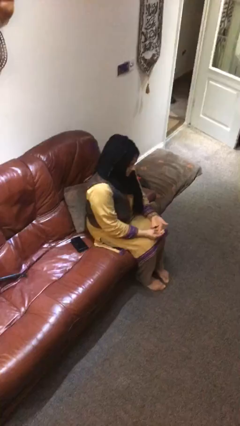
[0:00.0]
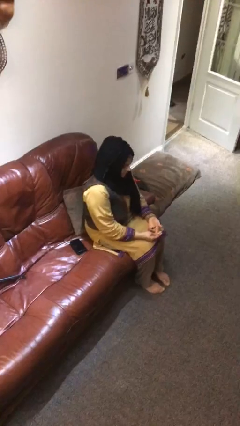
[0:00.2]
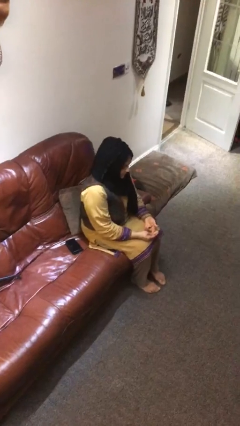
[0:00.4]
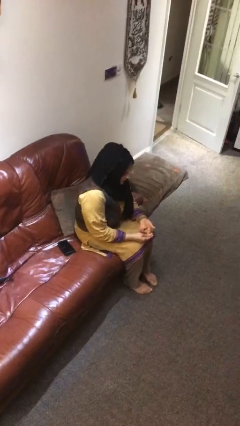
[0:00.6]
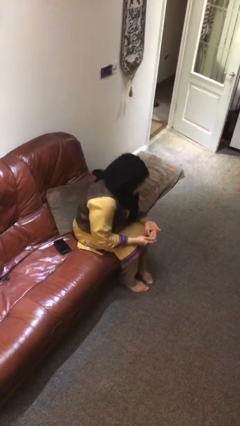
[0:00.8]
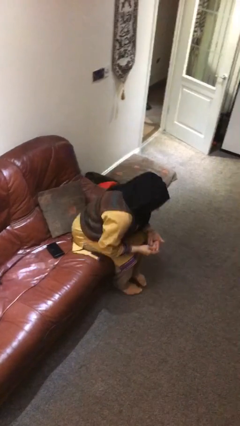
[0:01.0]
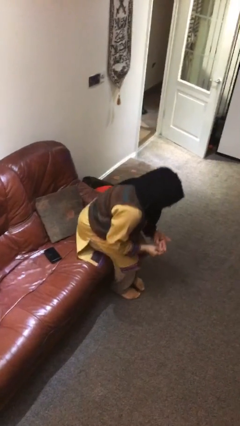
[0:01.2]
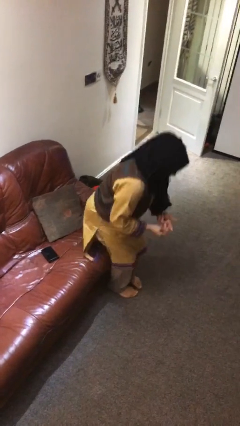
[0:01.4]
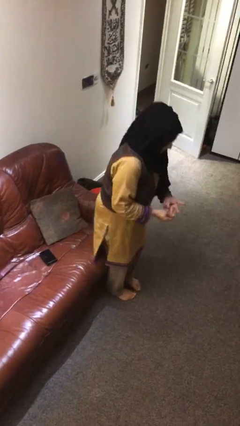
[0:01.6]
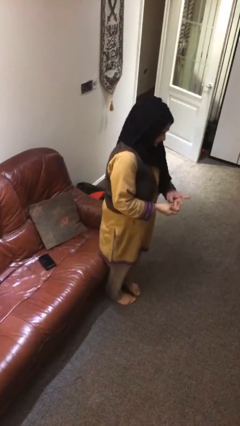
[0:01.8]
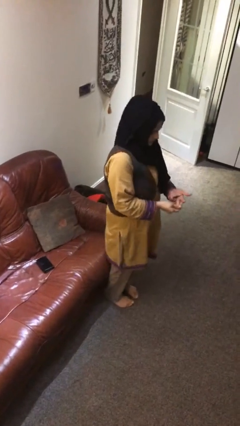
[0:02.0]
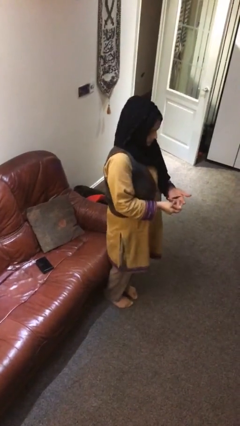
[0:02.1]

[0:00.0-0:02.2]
person stands up

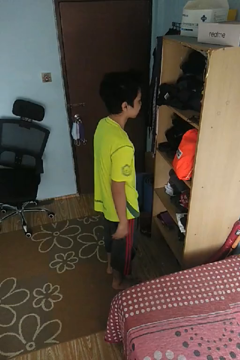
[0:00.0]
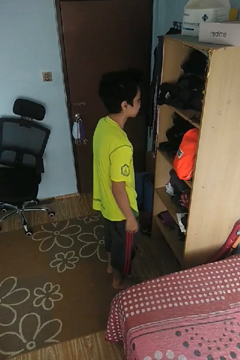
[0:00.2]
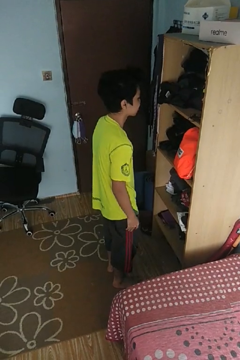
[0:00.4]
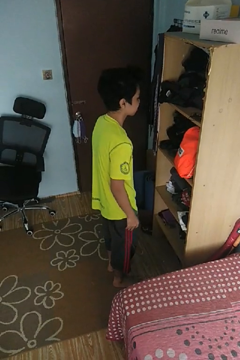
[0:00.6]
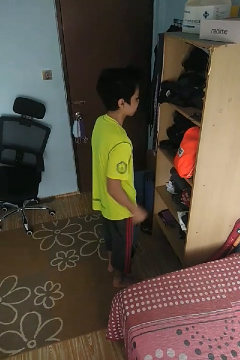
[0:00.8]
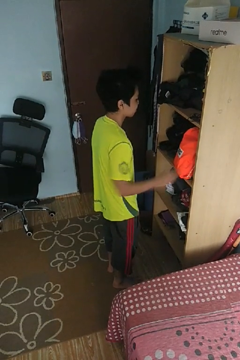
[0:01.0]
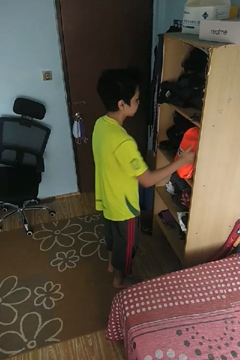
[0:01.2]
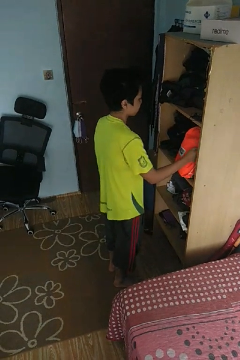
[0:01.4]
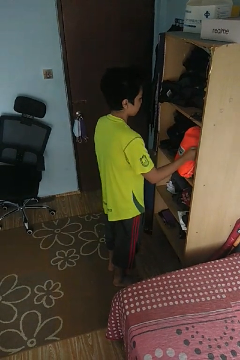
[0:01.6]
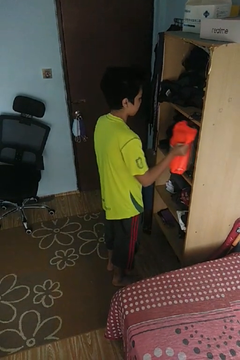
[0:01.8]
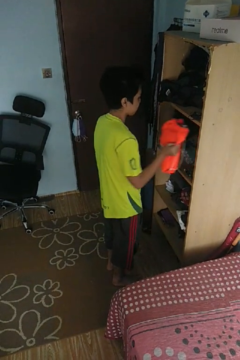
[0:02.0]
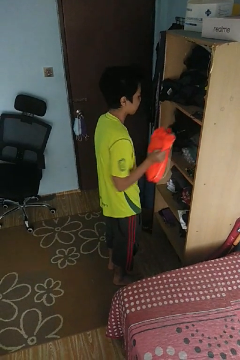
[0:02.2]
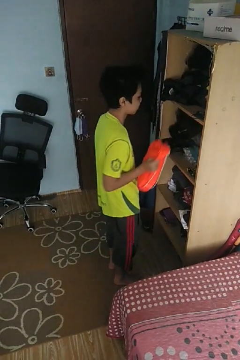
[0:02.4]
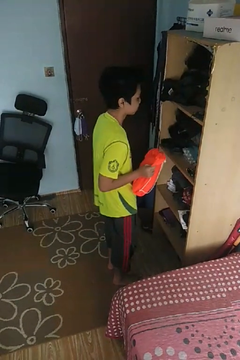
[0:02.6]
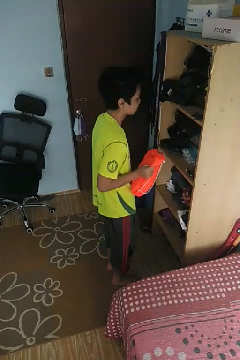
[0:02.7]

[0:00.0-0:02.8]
person picks up object from cabinet

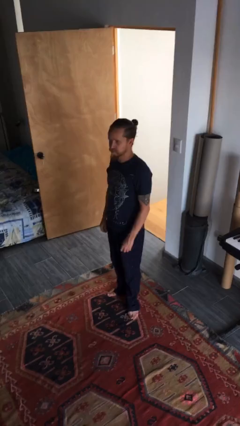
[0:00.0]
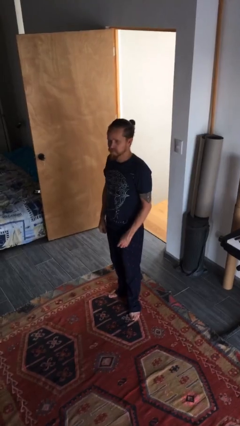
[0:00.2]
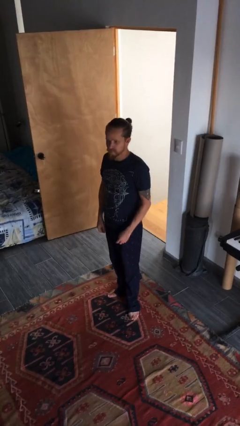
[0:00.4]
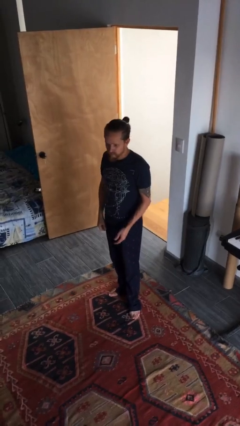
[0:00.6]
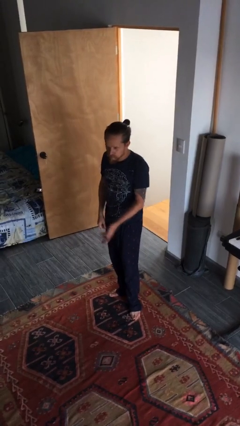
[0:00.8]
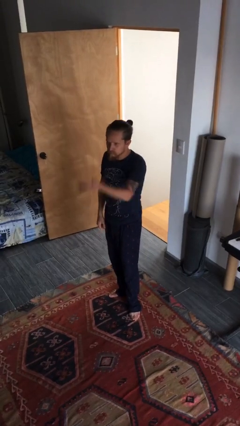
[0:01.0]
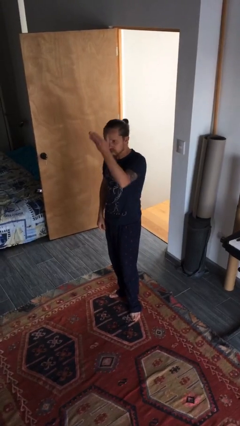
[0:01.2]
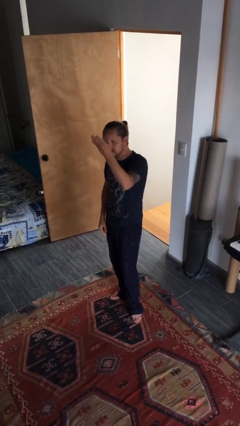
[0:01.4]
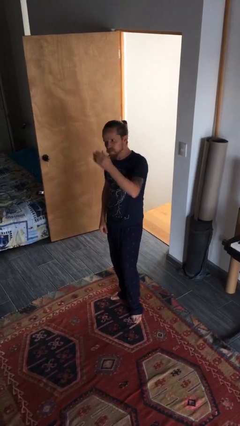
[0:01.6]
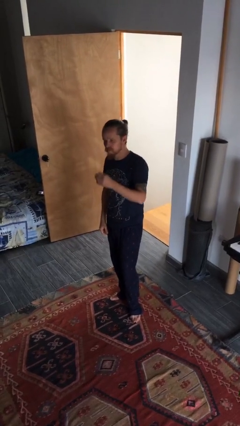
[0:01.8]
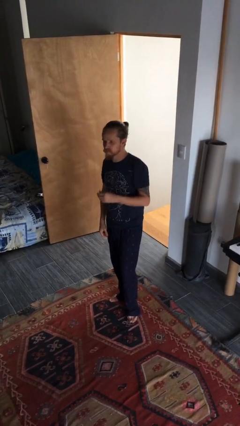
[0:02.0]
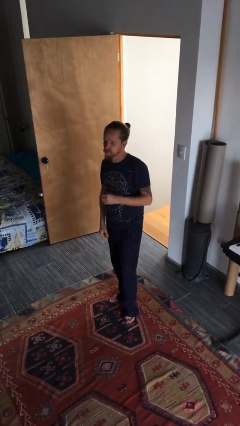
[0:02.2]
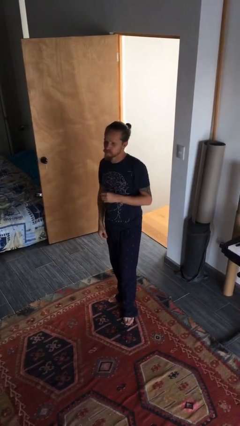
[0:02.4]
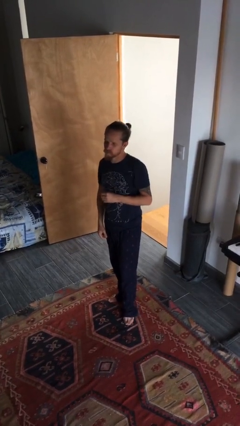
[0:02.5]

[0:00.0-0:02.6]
person gestures swipe up

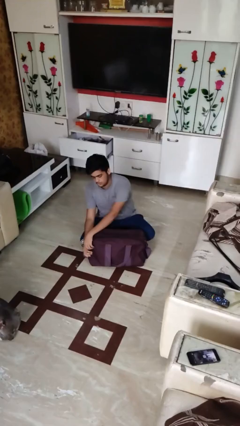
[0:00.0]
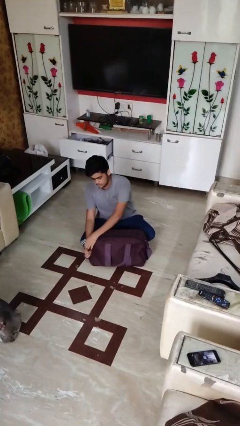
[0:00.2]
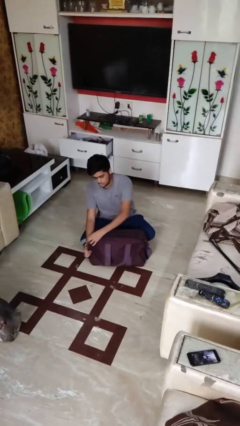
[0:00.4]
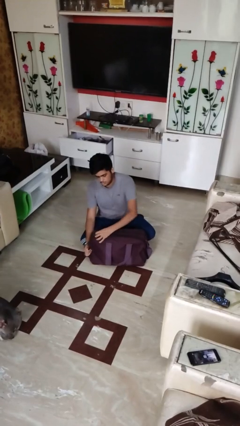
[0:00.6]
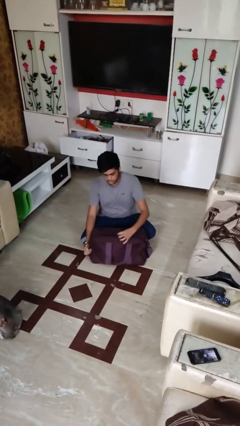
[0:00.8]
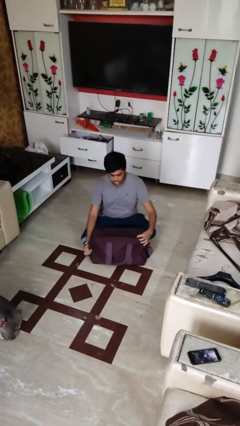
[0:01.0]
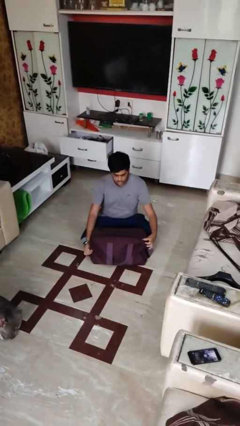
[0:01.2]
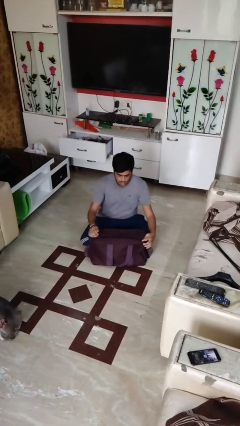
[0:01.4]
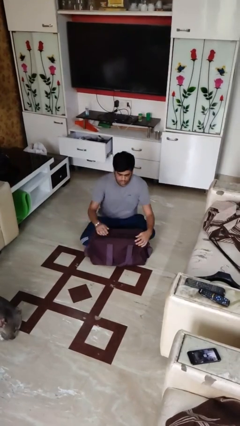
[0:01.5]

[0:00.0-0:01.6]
person opens suitcase

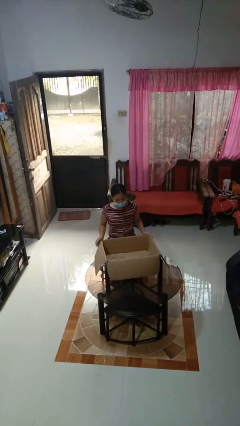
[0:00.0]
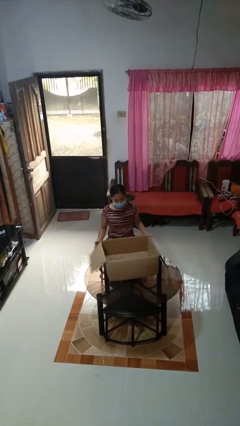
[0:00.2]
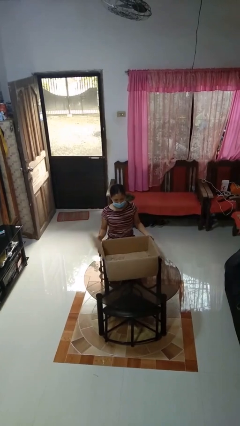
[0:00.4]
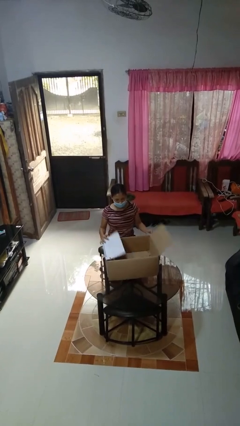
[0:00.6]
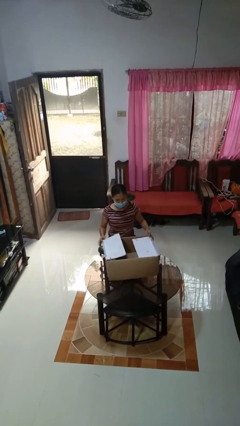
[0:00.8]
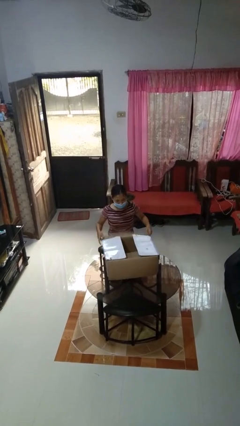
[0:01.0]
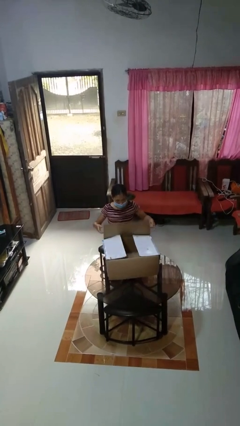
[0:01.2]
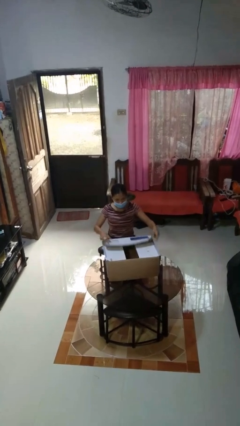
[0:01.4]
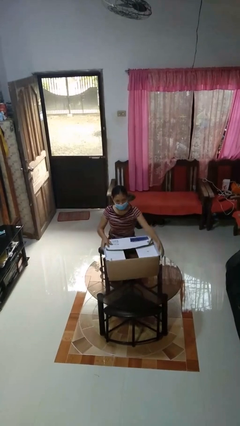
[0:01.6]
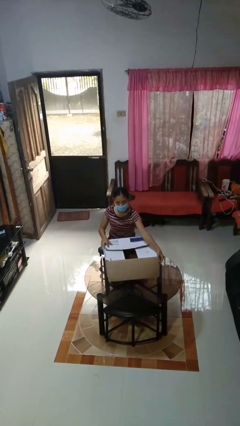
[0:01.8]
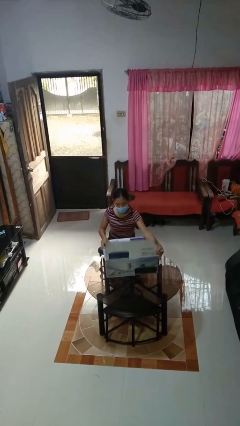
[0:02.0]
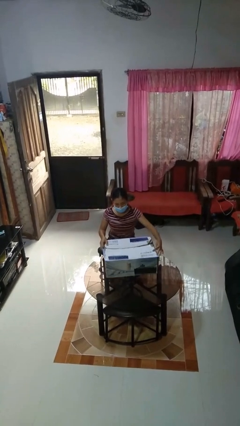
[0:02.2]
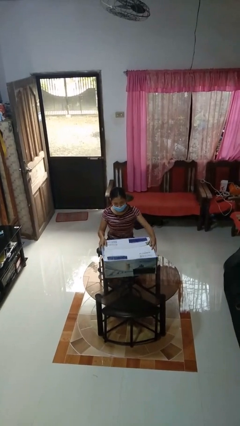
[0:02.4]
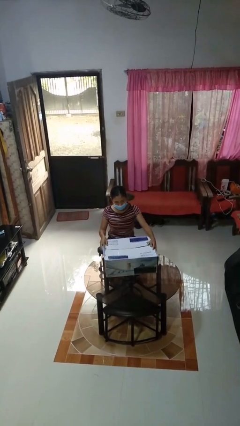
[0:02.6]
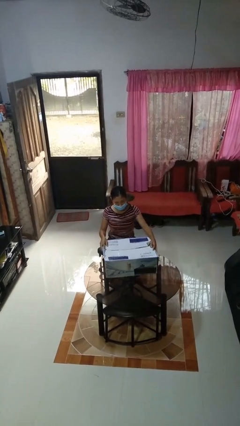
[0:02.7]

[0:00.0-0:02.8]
person closes box

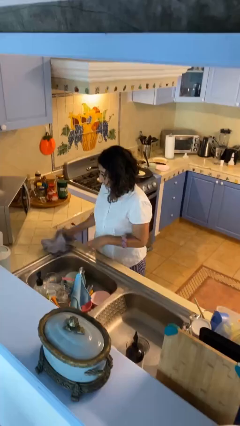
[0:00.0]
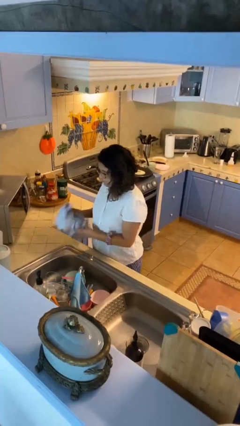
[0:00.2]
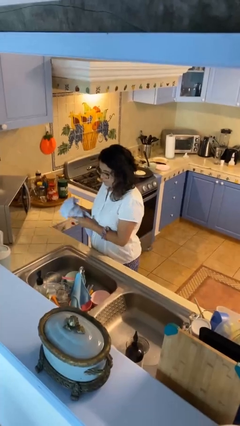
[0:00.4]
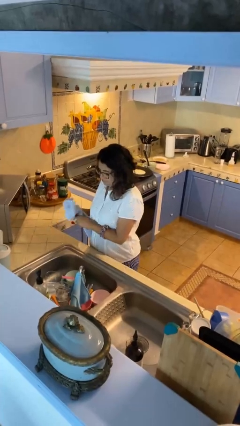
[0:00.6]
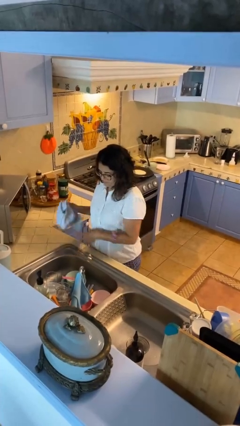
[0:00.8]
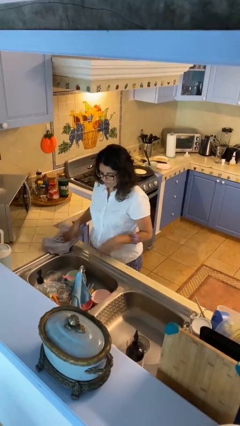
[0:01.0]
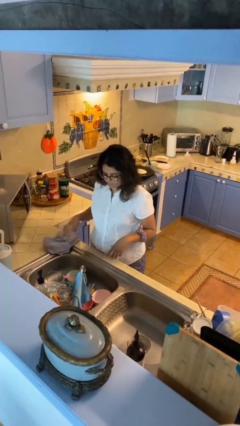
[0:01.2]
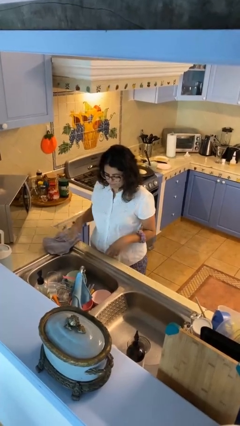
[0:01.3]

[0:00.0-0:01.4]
person dries hands with towel

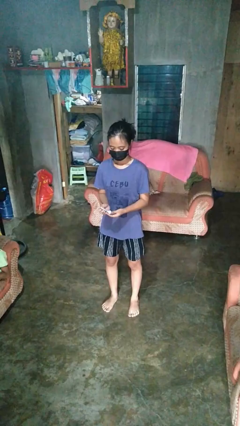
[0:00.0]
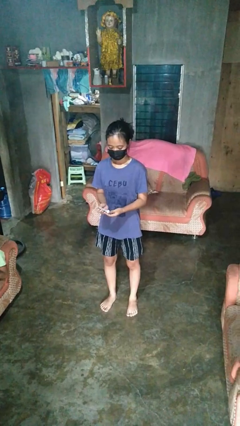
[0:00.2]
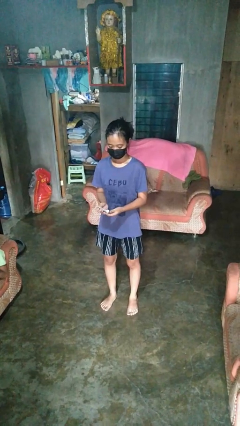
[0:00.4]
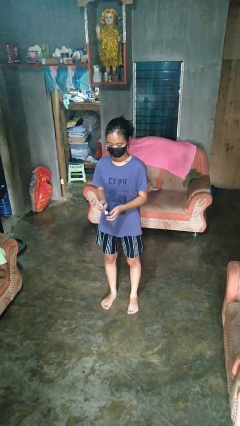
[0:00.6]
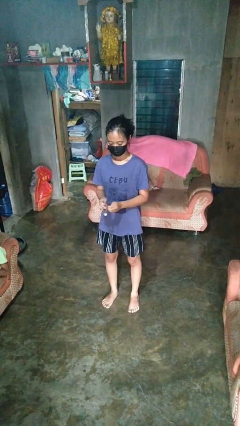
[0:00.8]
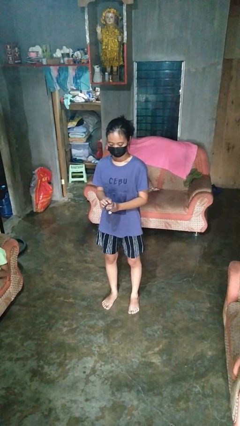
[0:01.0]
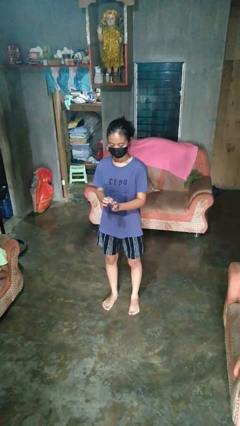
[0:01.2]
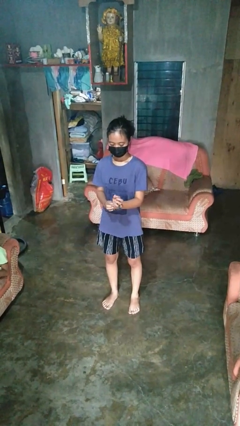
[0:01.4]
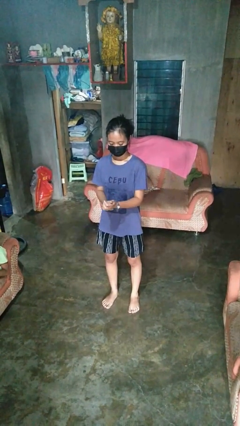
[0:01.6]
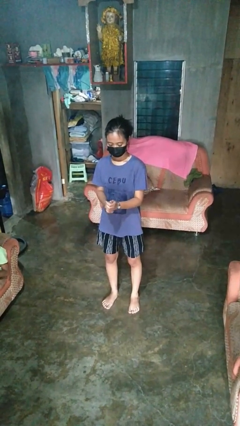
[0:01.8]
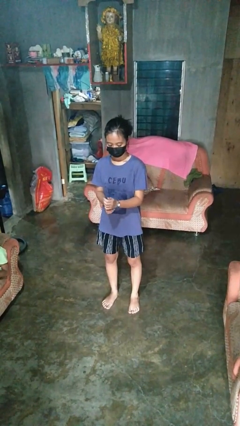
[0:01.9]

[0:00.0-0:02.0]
person puts on wristwatch

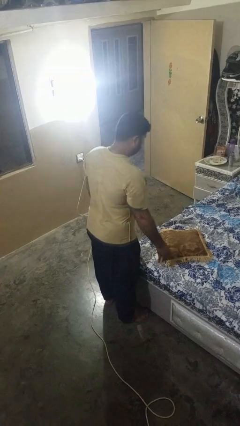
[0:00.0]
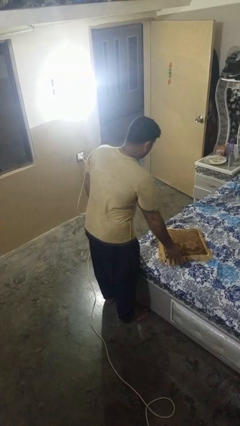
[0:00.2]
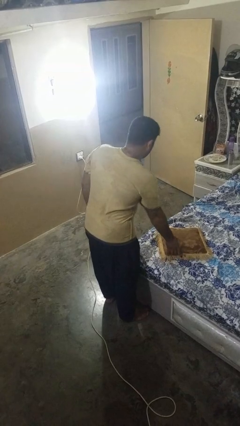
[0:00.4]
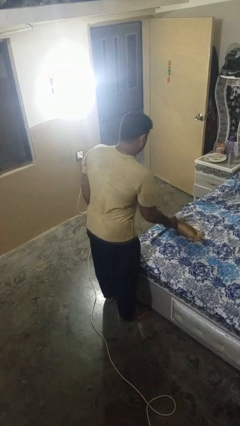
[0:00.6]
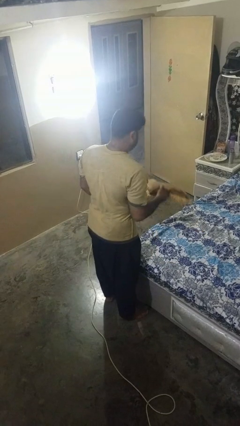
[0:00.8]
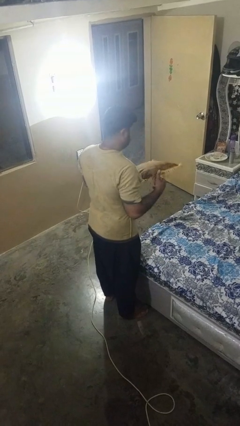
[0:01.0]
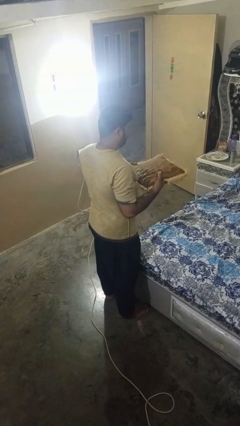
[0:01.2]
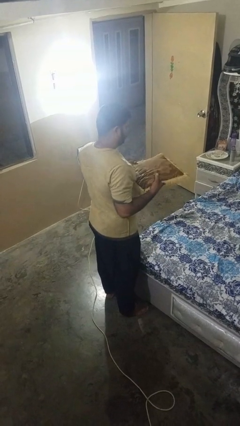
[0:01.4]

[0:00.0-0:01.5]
person picks up object from bed

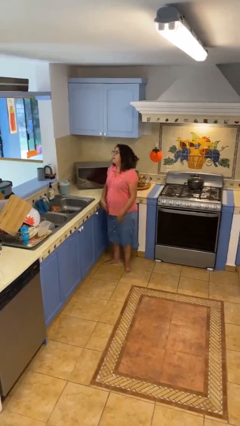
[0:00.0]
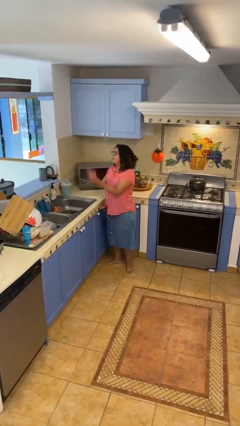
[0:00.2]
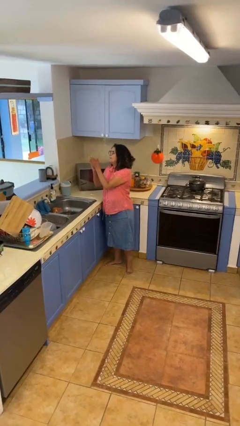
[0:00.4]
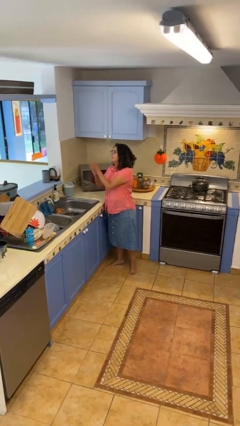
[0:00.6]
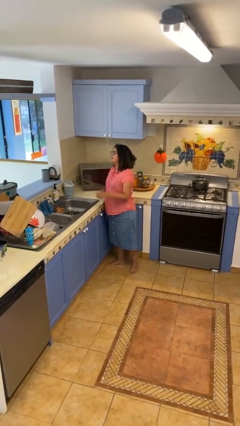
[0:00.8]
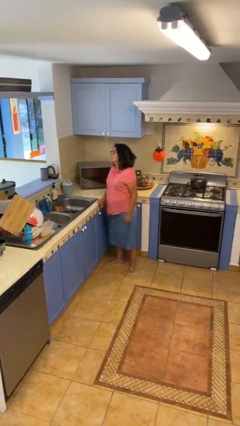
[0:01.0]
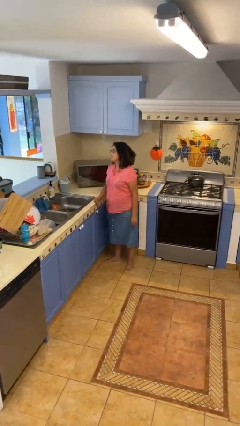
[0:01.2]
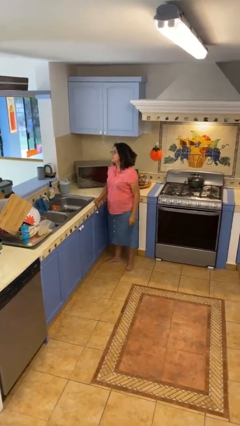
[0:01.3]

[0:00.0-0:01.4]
person claps hands
